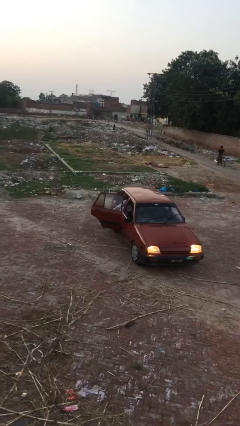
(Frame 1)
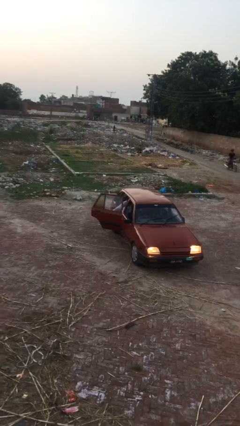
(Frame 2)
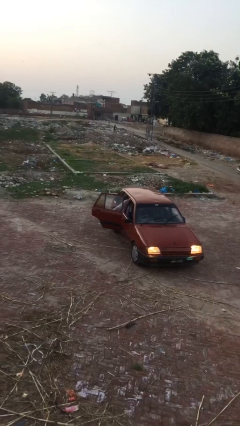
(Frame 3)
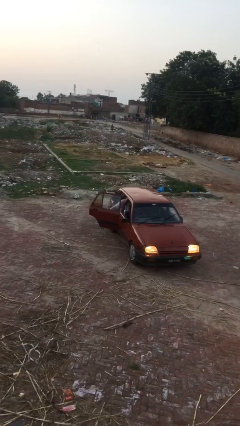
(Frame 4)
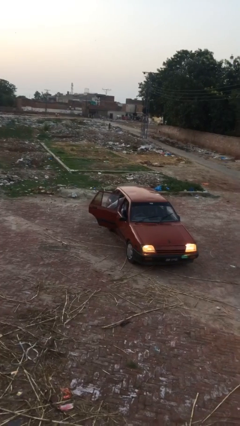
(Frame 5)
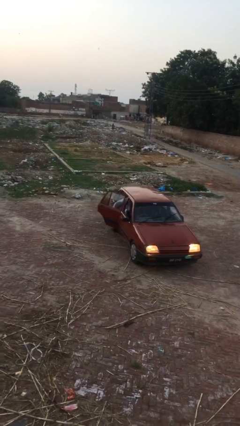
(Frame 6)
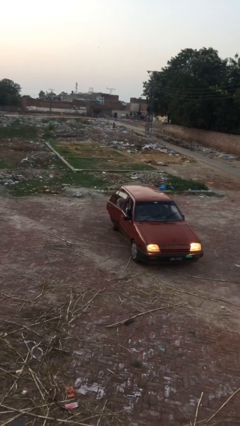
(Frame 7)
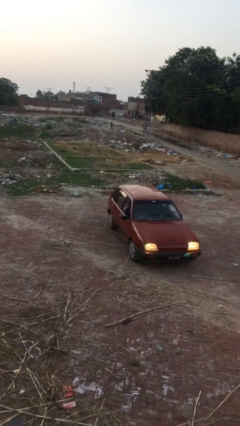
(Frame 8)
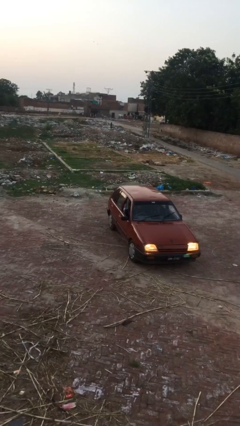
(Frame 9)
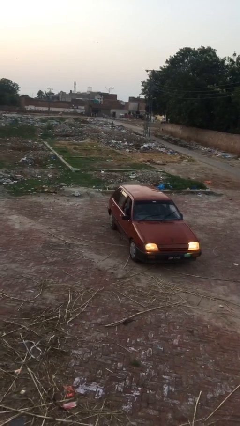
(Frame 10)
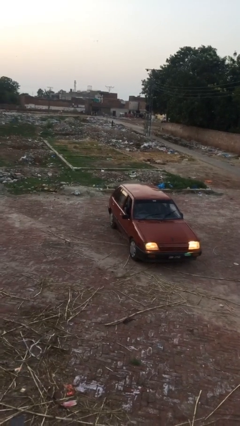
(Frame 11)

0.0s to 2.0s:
person closes car door

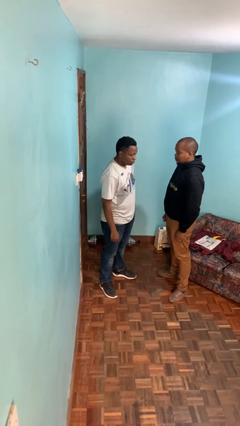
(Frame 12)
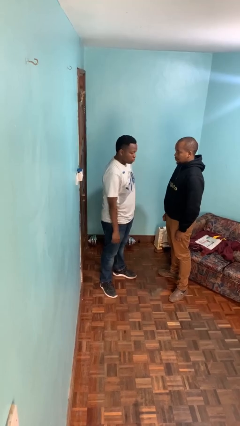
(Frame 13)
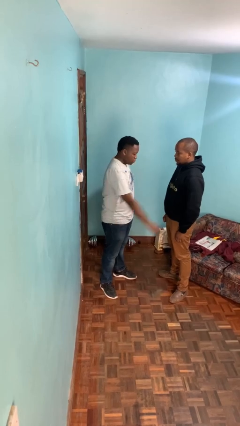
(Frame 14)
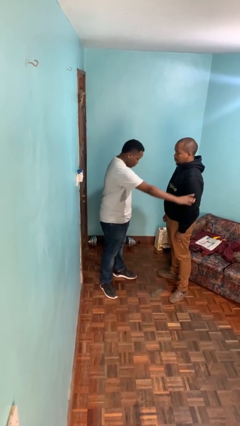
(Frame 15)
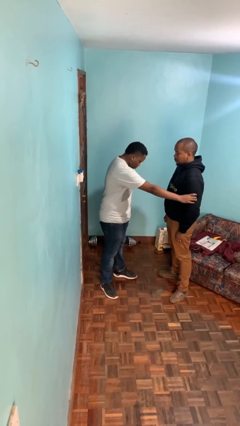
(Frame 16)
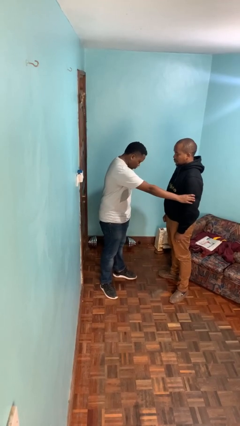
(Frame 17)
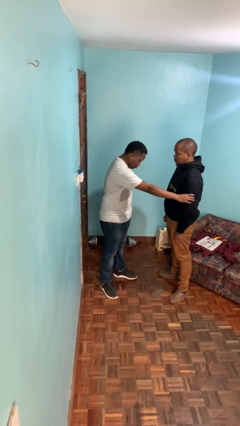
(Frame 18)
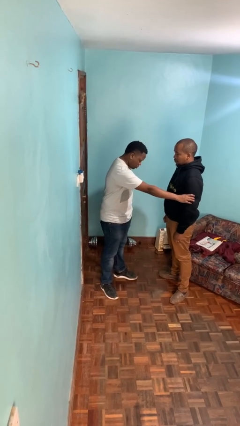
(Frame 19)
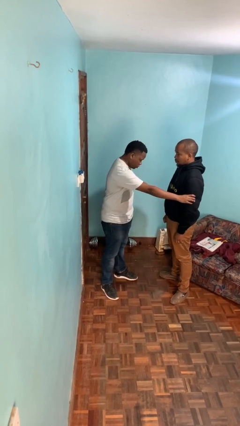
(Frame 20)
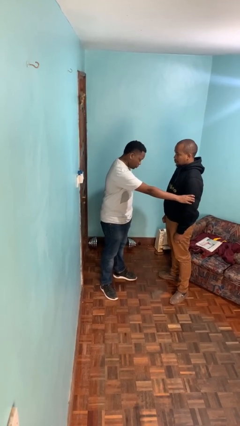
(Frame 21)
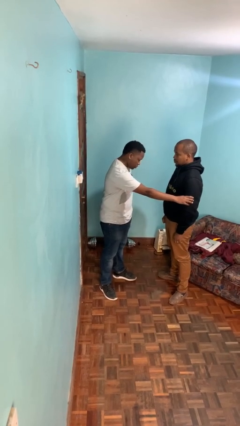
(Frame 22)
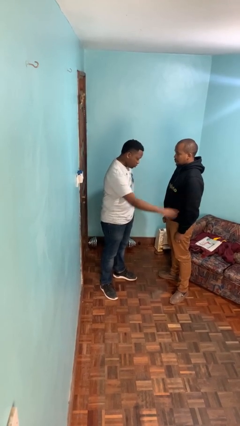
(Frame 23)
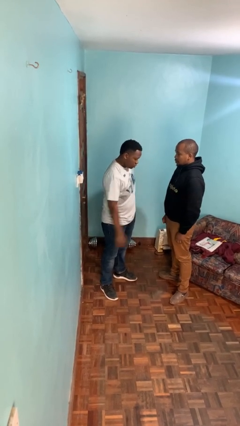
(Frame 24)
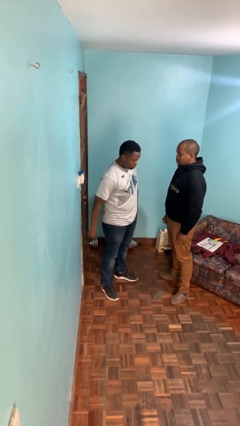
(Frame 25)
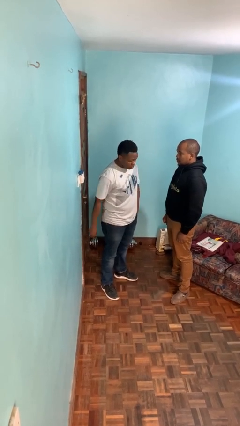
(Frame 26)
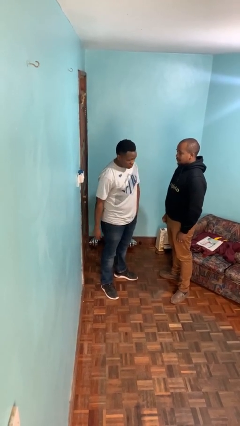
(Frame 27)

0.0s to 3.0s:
person grabs person by bicep

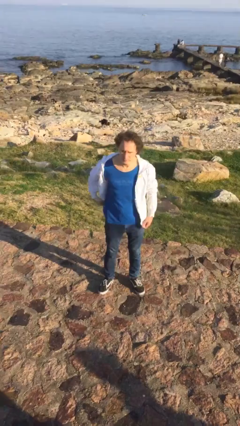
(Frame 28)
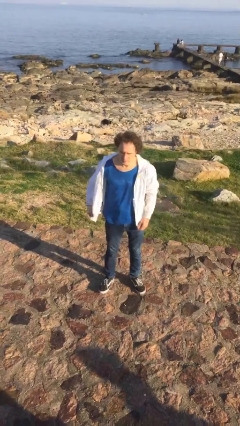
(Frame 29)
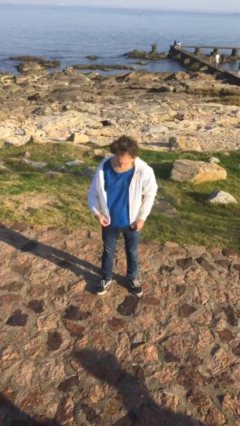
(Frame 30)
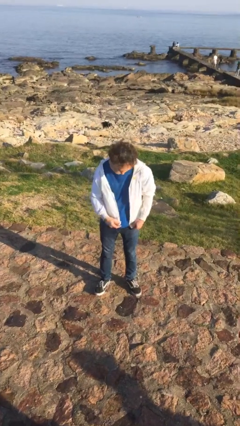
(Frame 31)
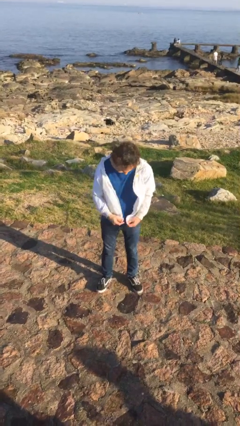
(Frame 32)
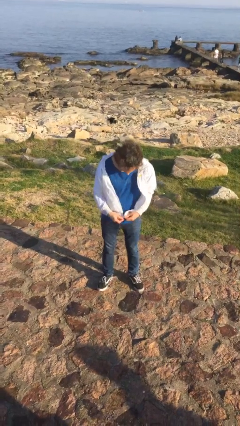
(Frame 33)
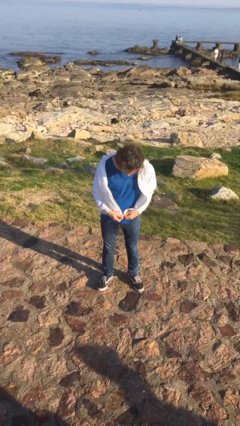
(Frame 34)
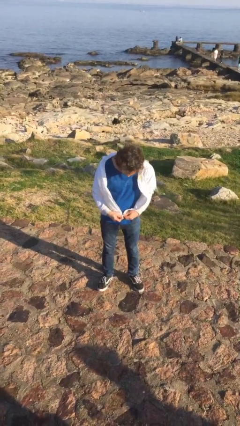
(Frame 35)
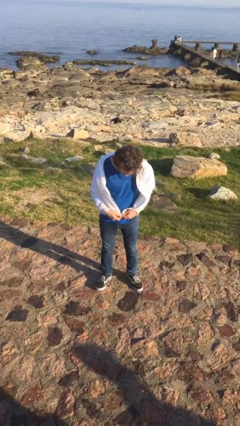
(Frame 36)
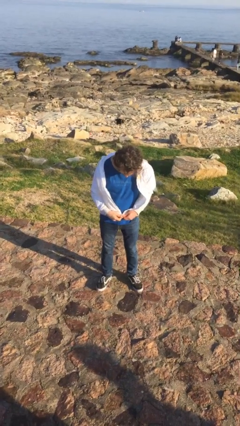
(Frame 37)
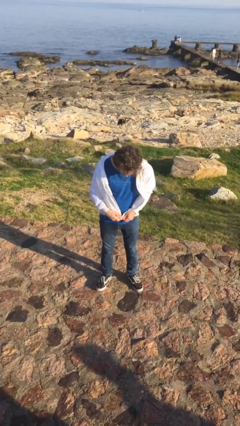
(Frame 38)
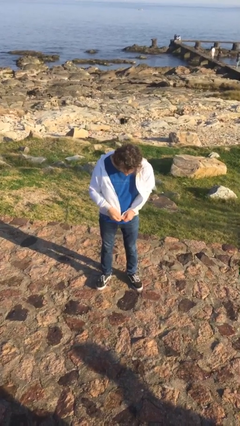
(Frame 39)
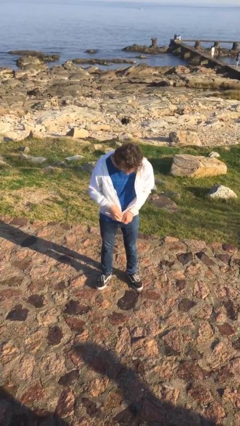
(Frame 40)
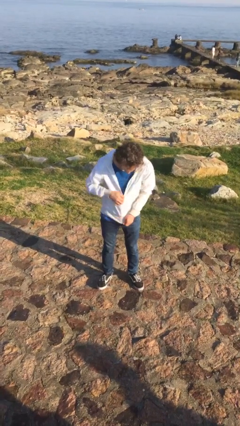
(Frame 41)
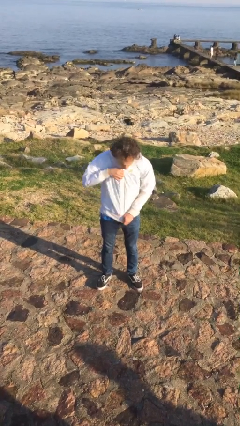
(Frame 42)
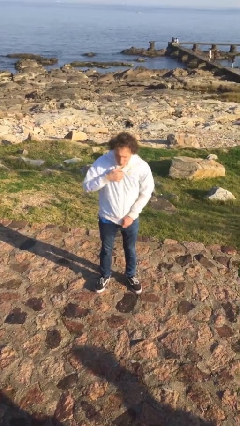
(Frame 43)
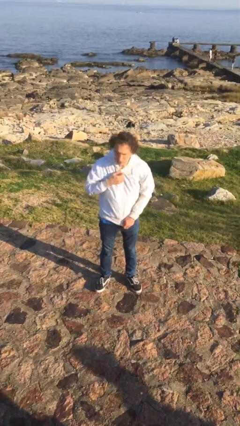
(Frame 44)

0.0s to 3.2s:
person zips up jacket

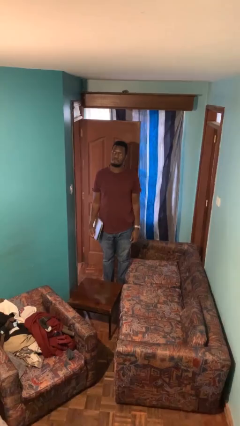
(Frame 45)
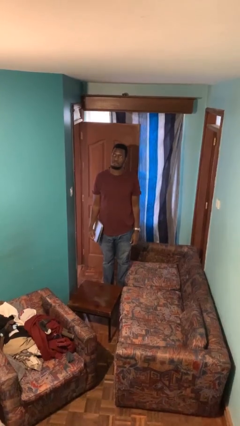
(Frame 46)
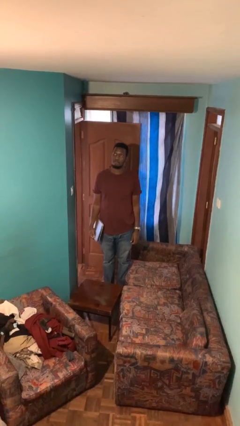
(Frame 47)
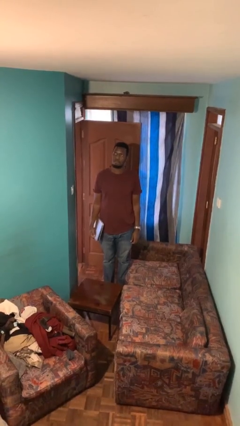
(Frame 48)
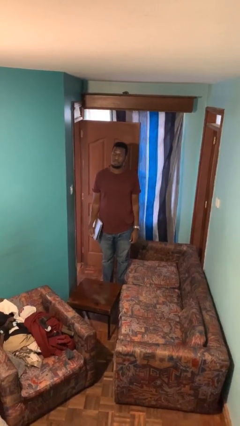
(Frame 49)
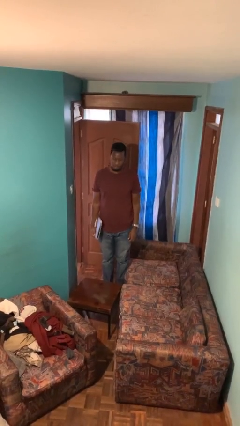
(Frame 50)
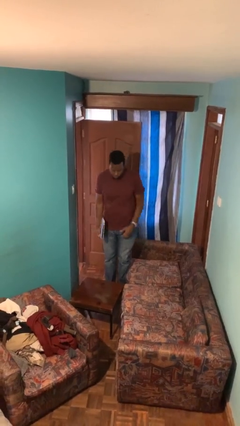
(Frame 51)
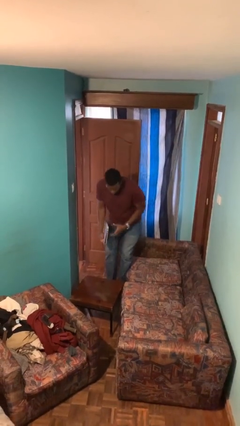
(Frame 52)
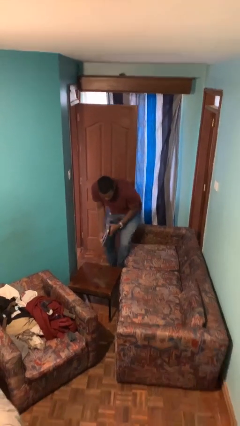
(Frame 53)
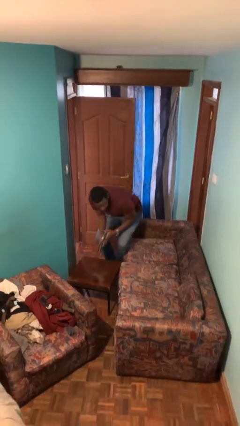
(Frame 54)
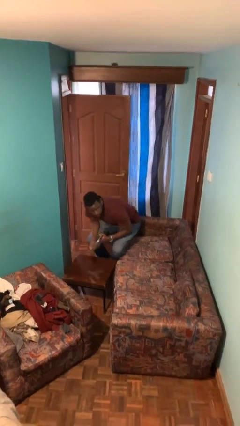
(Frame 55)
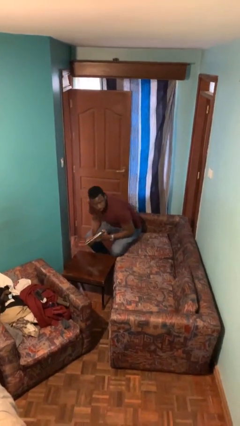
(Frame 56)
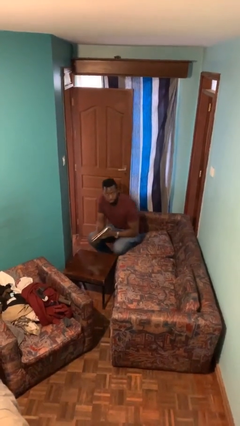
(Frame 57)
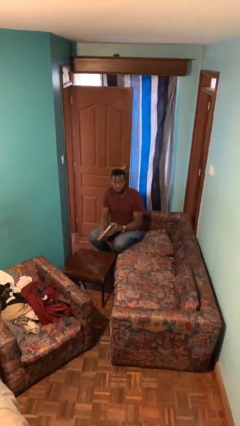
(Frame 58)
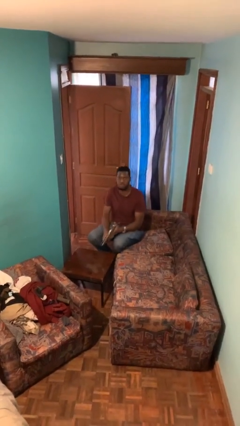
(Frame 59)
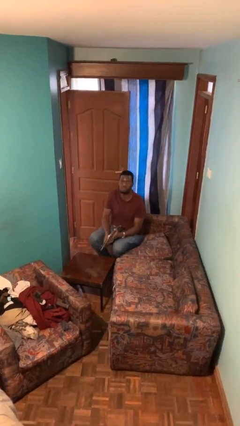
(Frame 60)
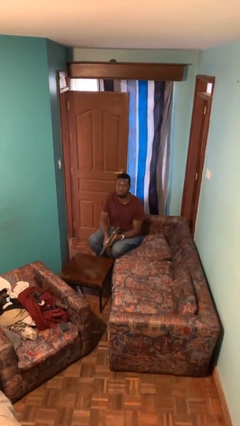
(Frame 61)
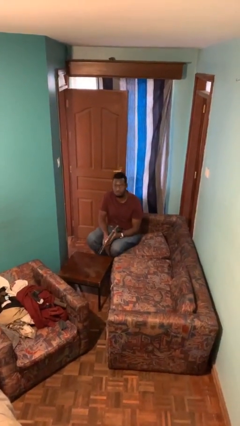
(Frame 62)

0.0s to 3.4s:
person sits down

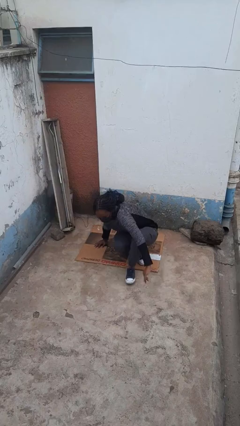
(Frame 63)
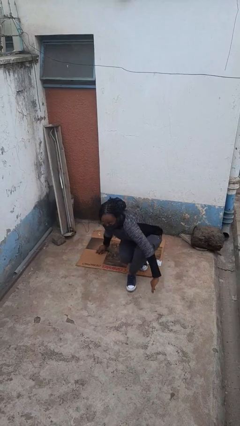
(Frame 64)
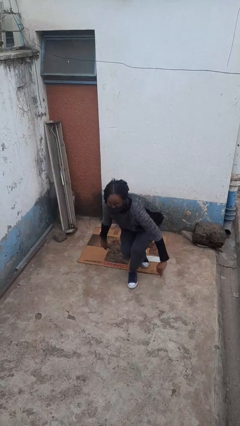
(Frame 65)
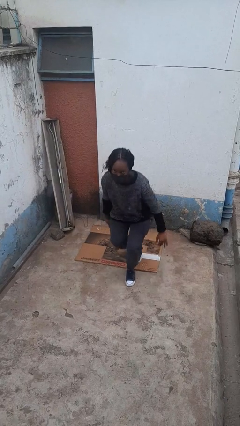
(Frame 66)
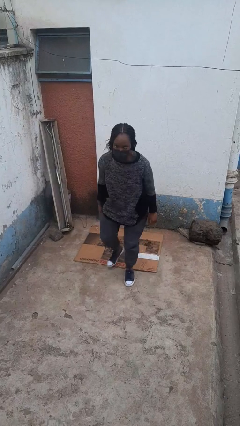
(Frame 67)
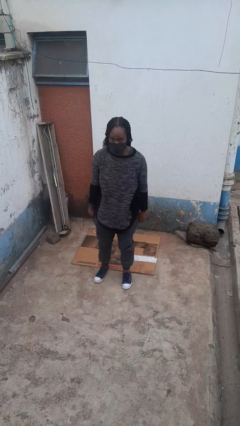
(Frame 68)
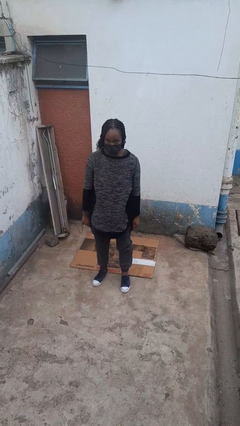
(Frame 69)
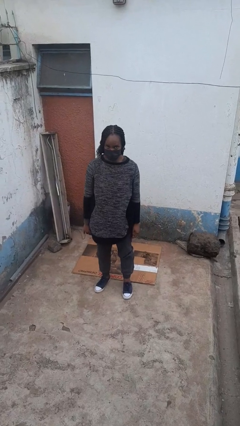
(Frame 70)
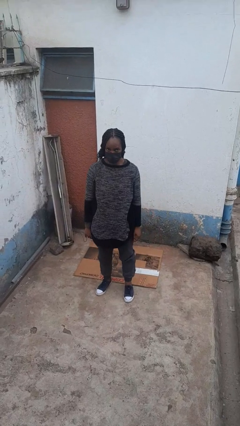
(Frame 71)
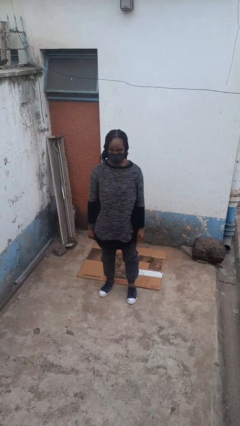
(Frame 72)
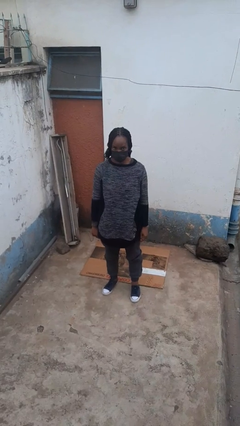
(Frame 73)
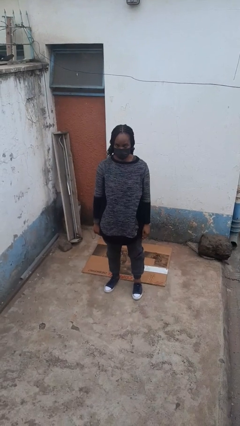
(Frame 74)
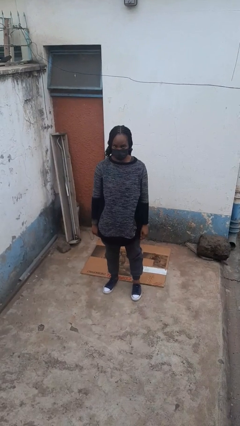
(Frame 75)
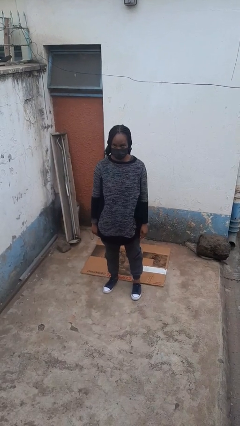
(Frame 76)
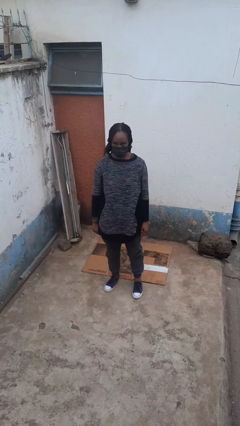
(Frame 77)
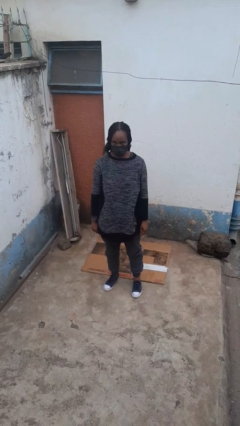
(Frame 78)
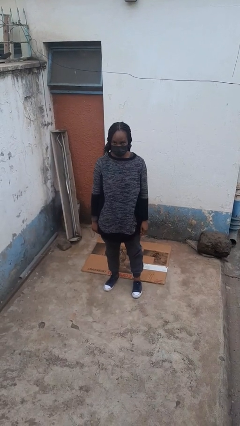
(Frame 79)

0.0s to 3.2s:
person stands up from floor

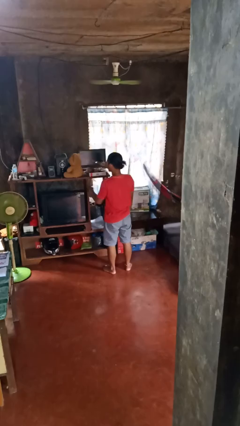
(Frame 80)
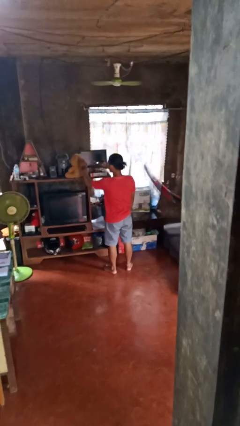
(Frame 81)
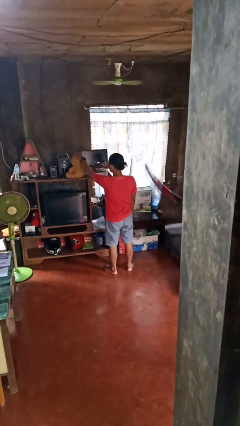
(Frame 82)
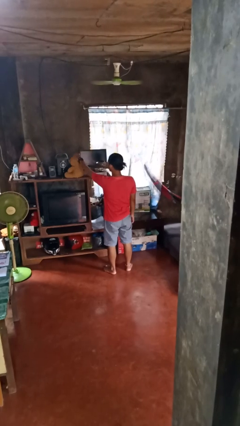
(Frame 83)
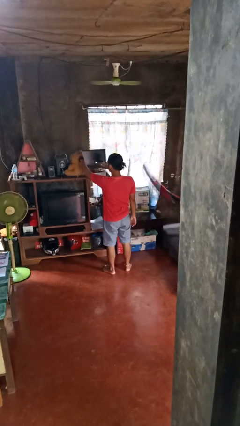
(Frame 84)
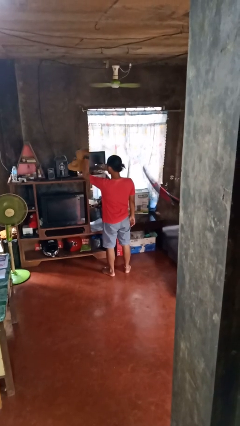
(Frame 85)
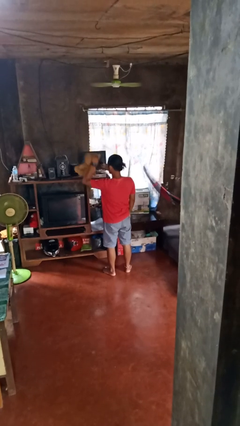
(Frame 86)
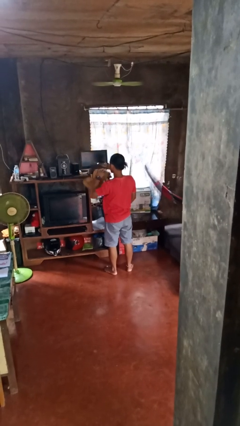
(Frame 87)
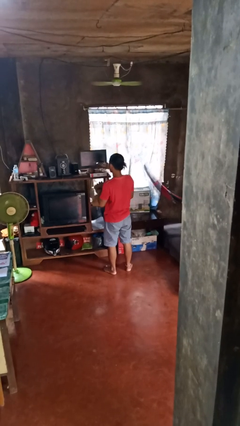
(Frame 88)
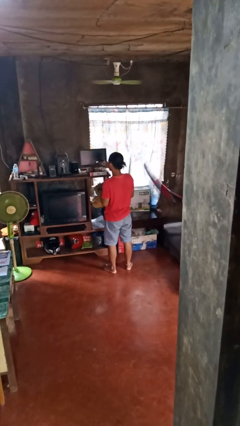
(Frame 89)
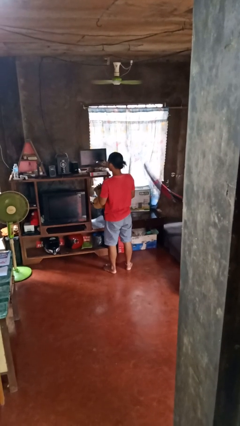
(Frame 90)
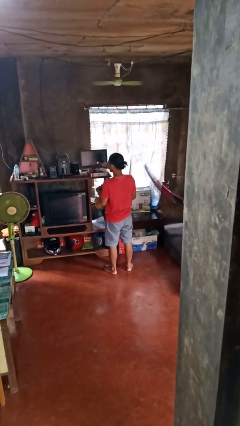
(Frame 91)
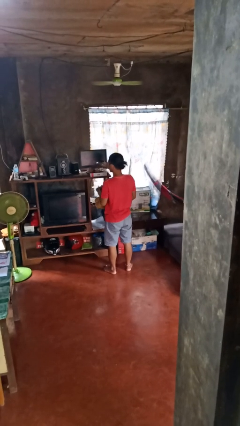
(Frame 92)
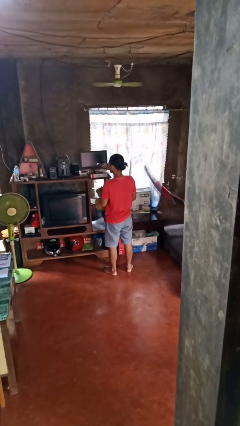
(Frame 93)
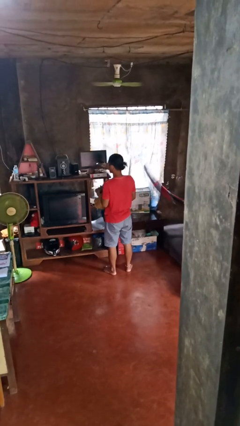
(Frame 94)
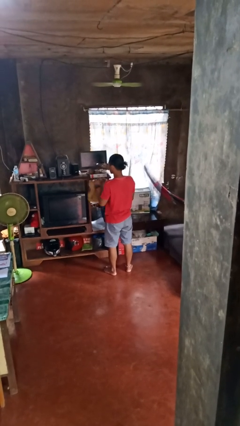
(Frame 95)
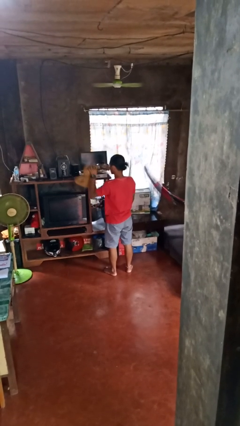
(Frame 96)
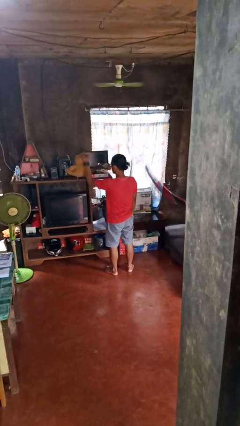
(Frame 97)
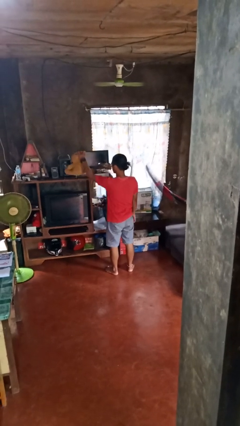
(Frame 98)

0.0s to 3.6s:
person picks up object from shelf
